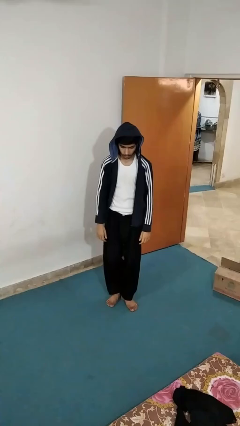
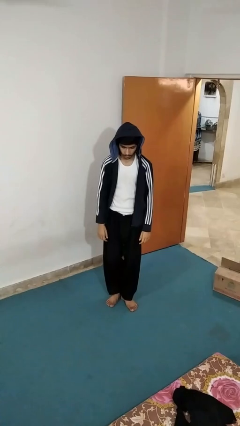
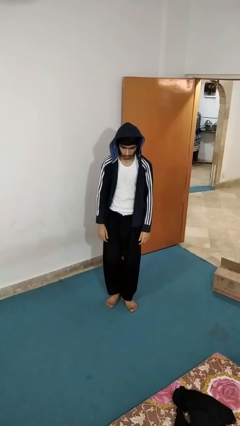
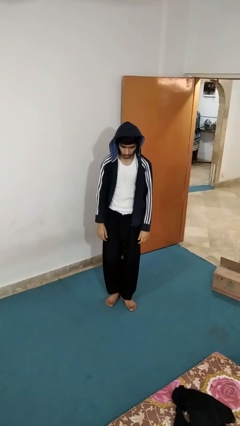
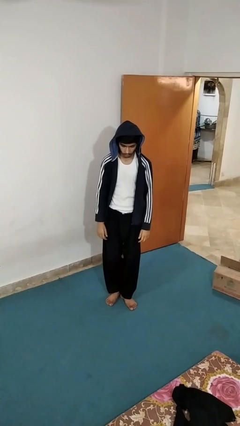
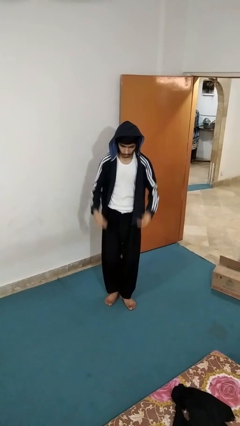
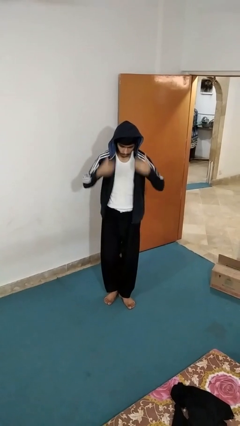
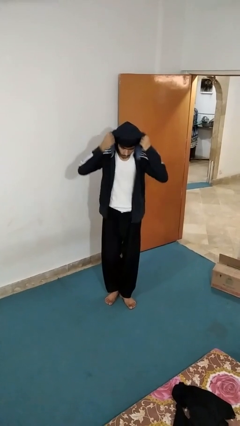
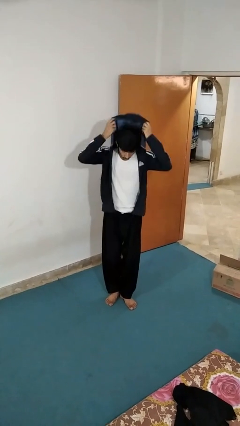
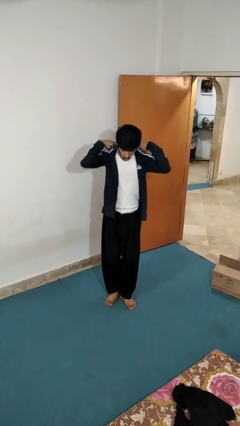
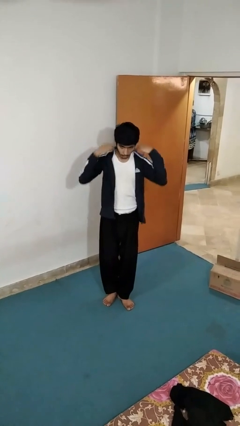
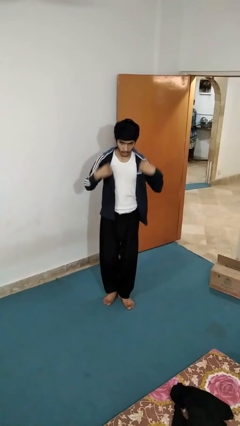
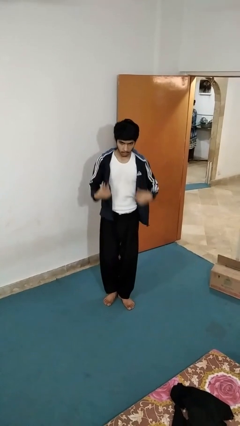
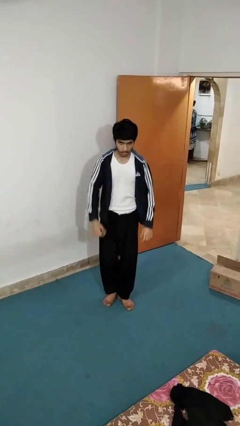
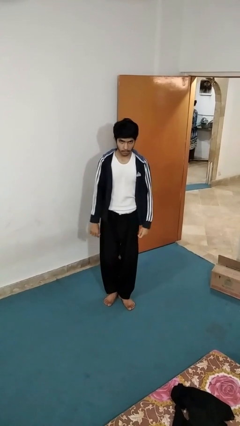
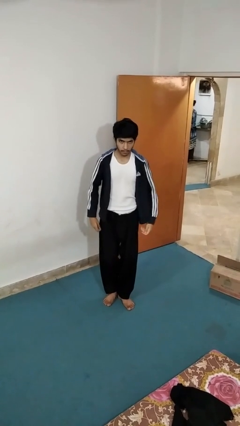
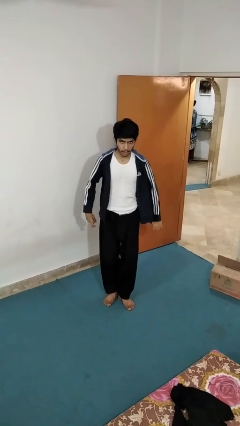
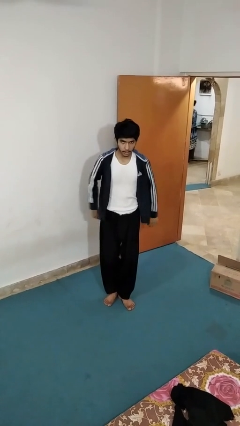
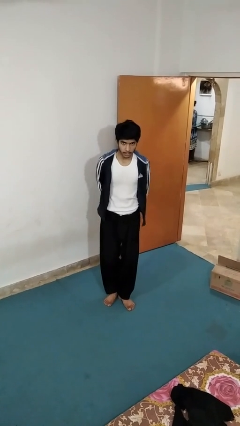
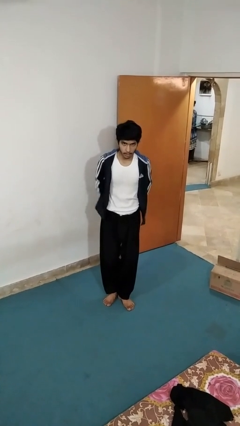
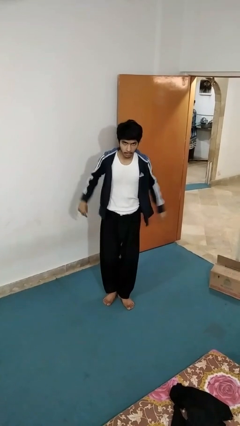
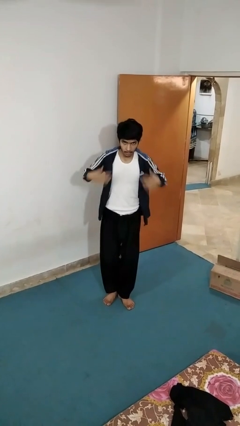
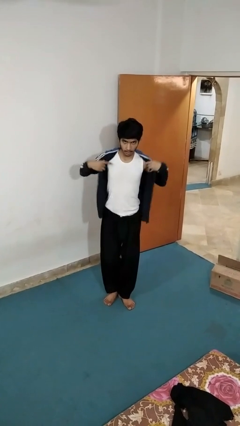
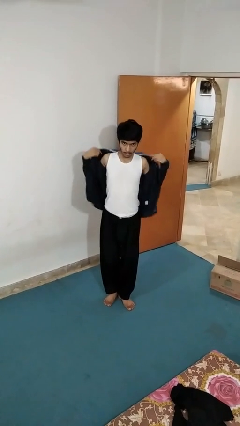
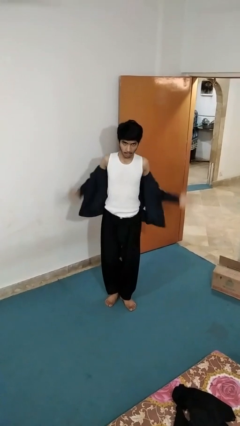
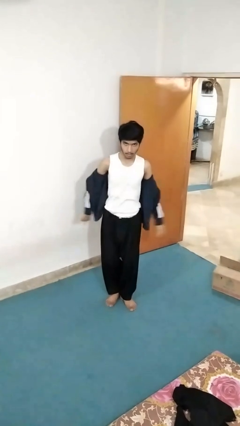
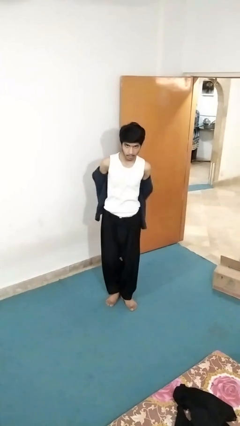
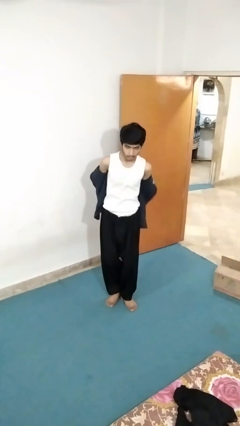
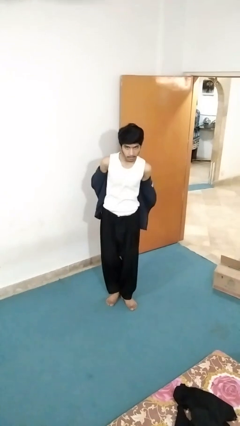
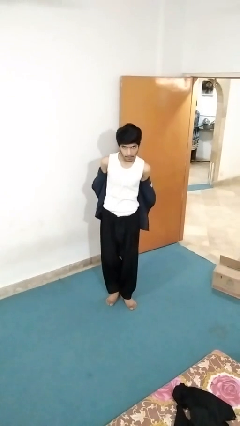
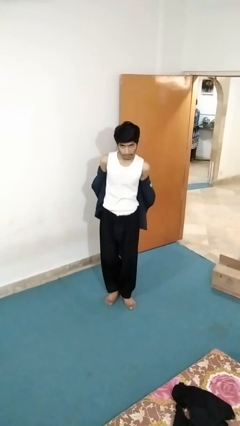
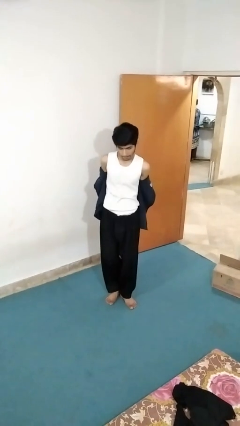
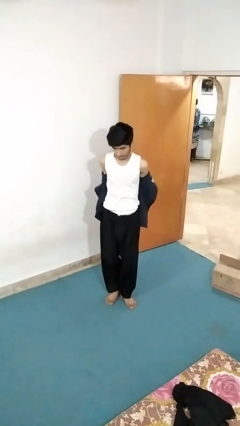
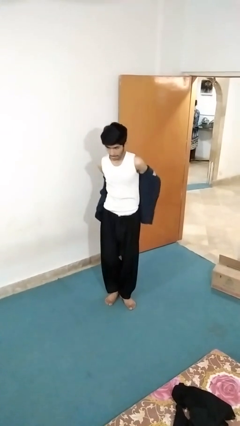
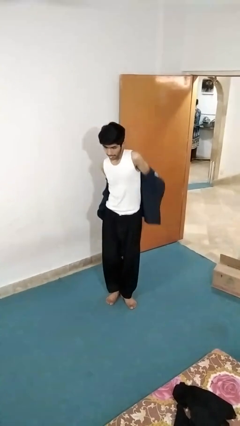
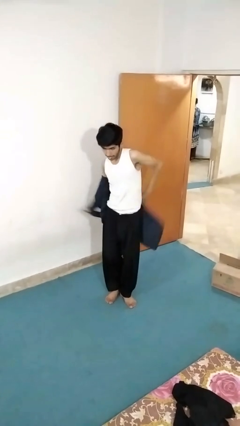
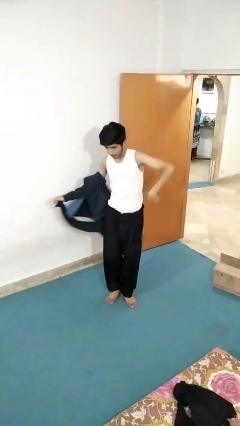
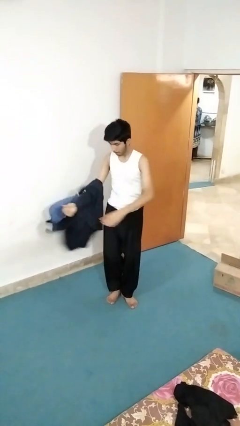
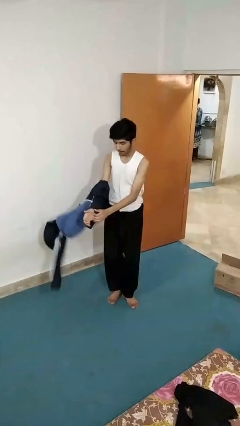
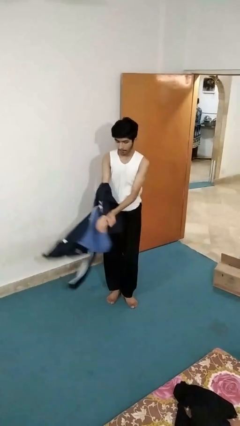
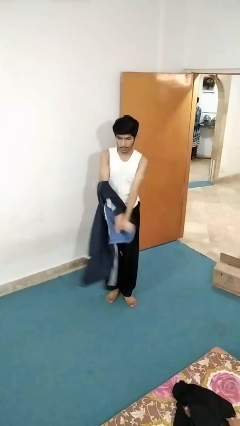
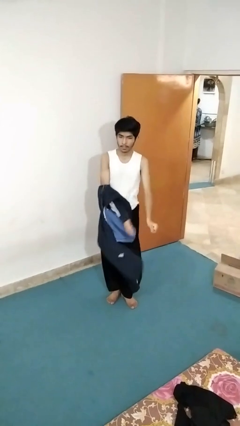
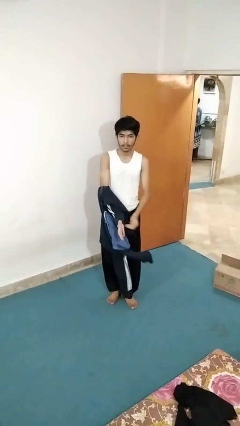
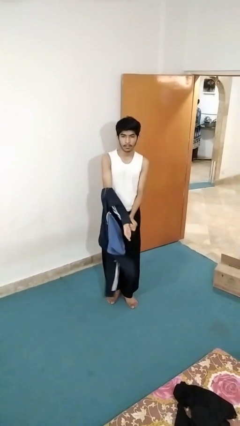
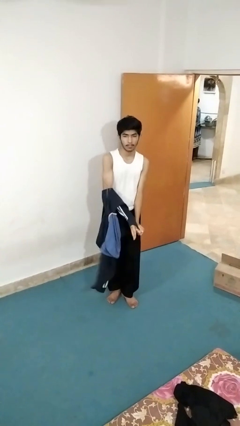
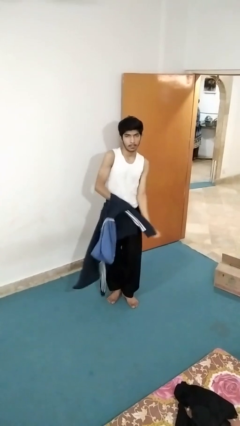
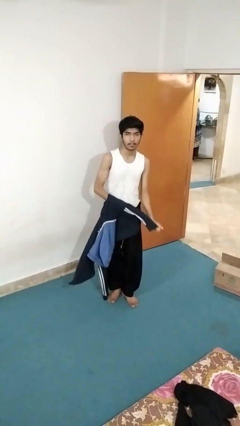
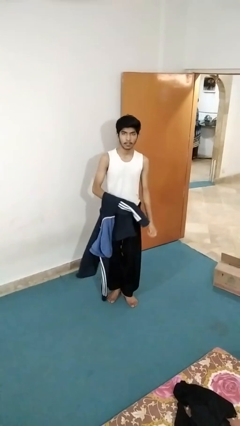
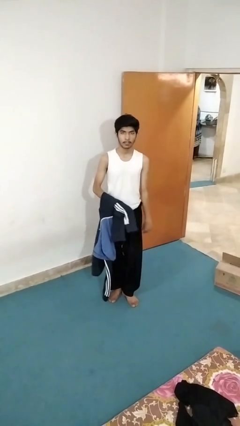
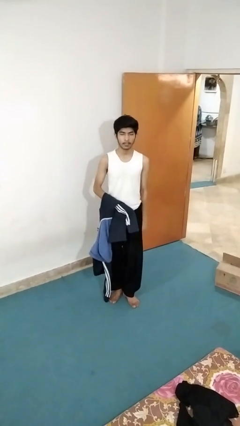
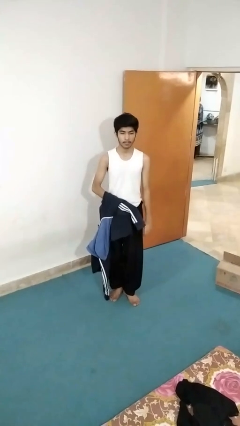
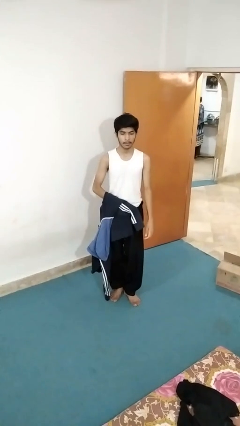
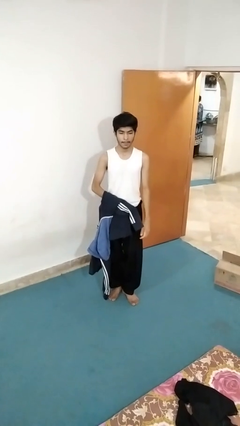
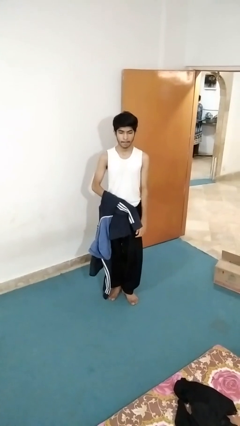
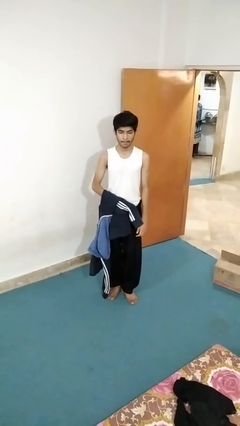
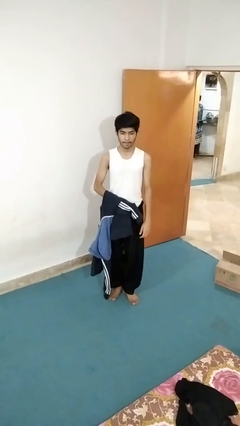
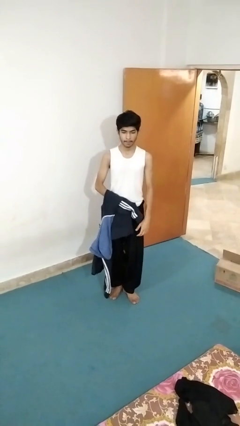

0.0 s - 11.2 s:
person takes off hoodie

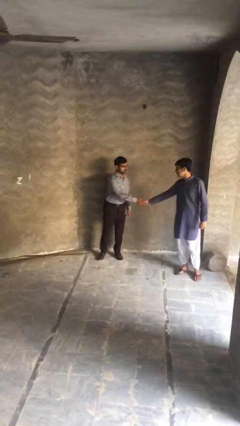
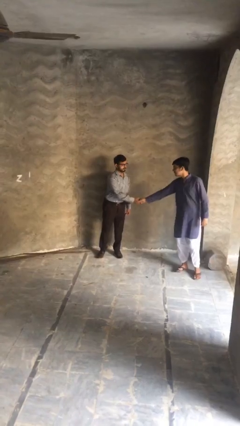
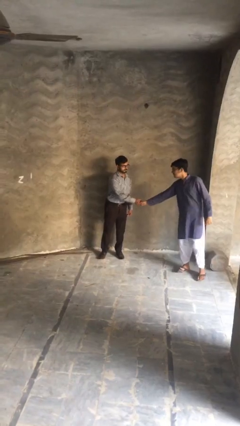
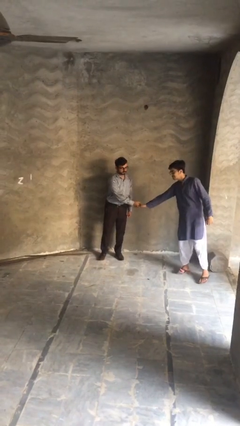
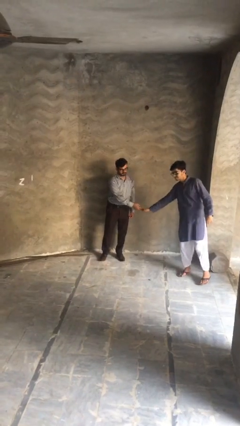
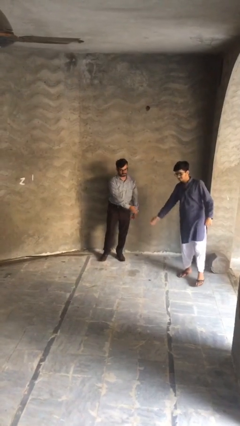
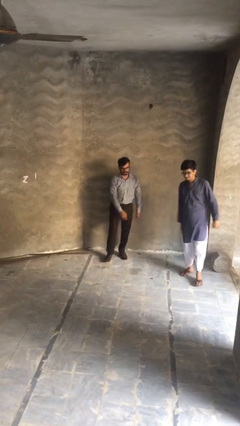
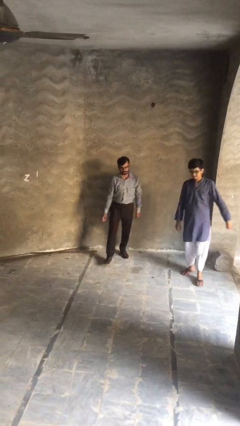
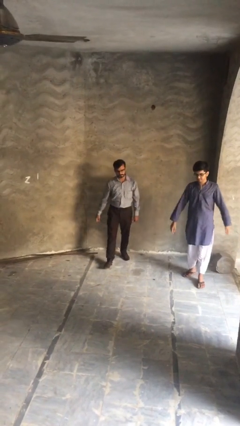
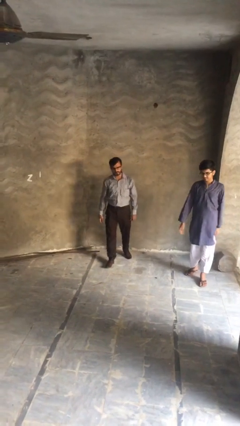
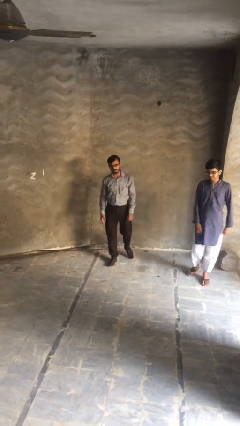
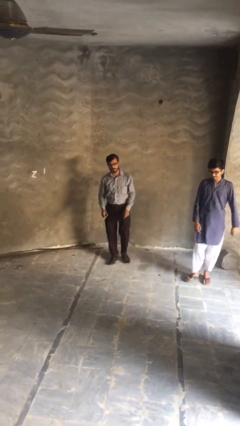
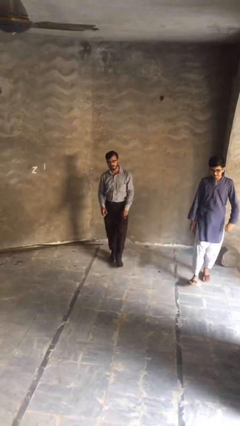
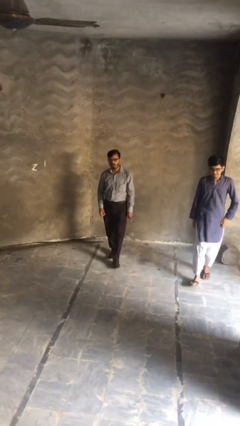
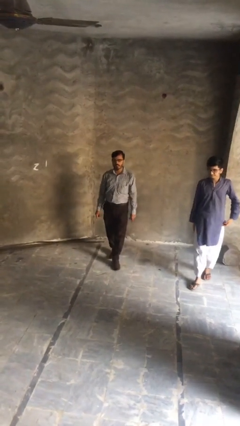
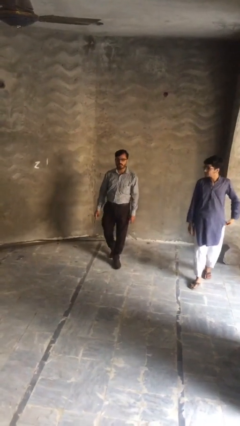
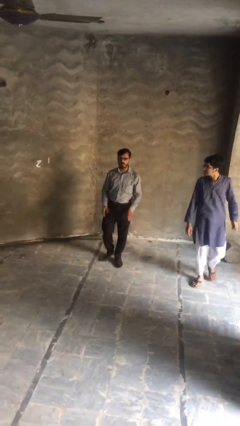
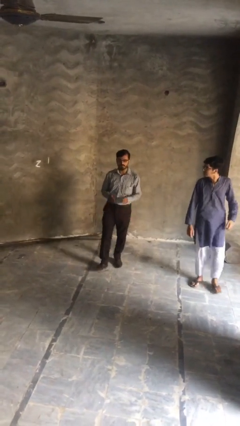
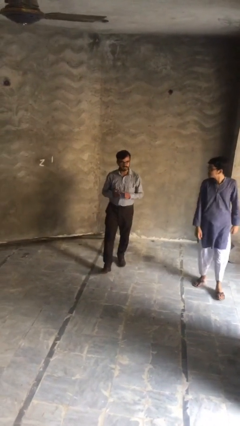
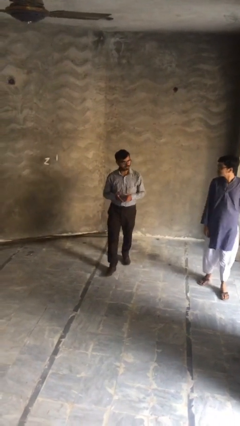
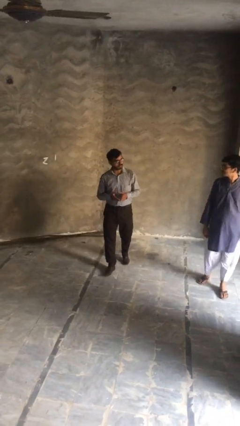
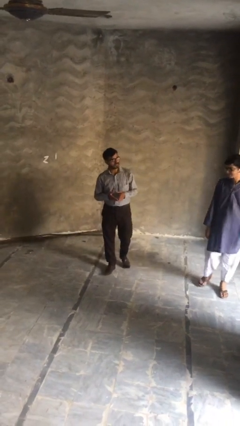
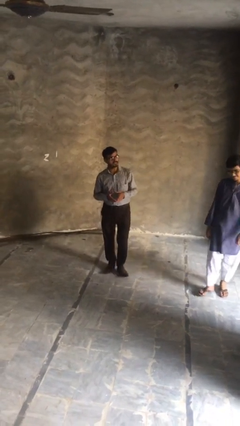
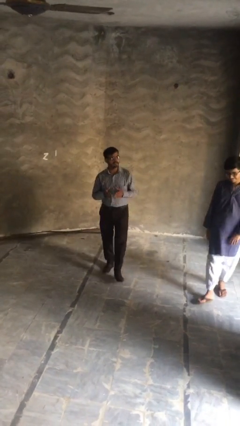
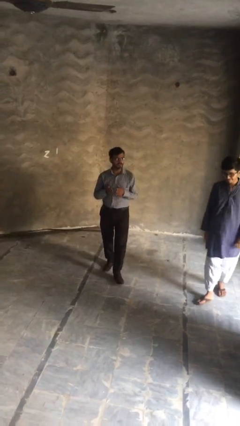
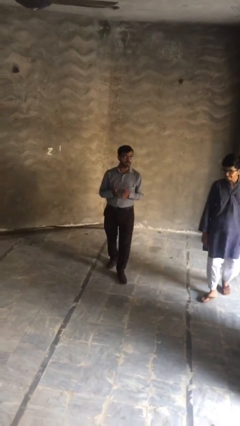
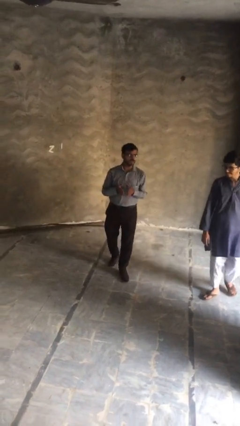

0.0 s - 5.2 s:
person talks to person

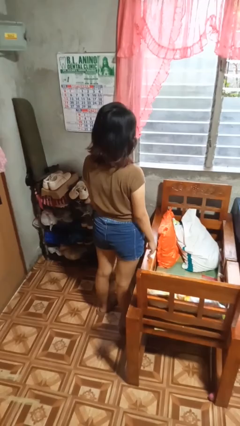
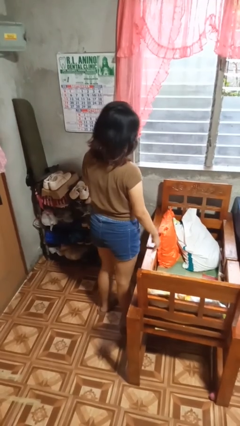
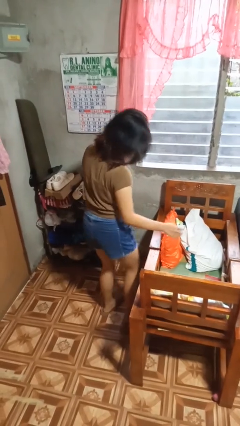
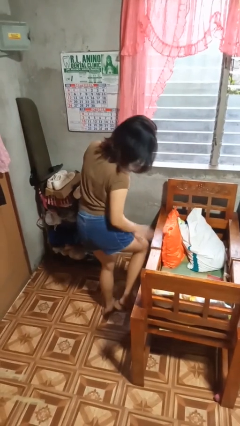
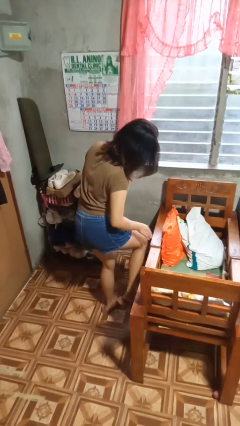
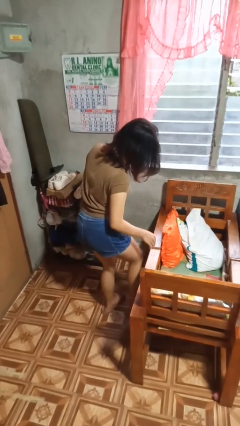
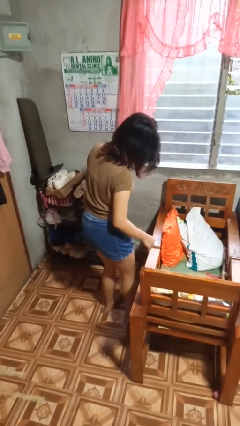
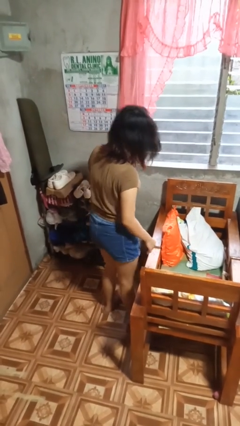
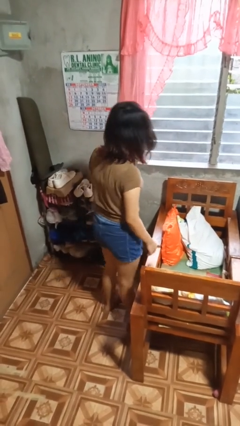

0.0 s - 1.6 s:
person swats bug
